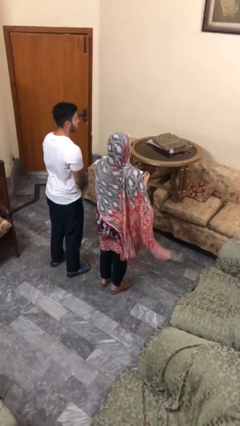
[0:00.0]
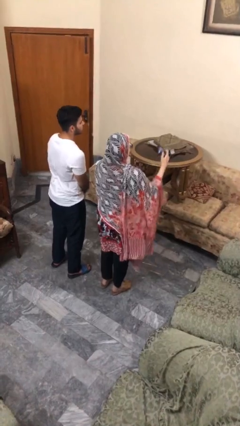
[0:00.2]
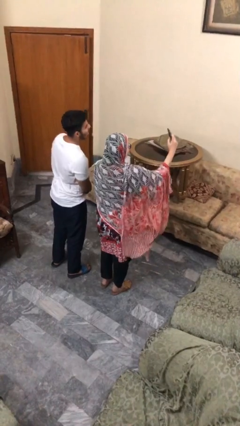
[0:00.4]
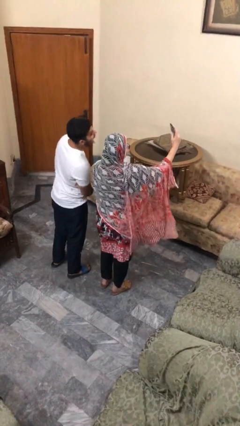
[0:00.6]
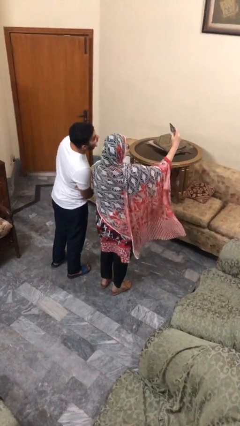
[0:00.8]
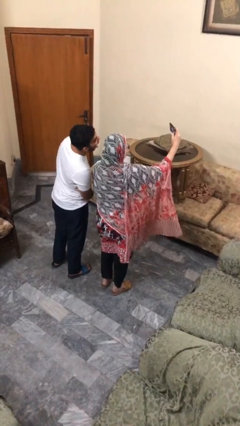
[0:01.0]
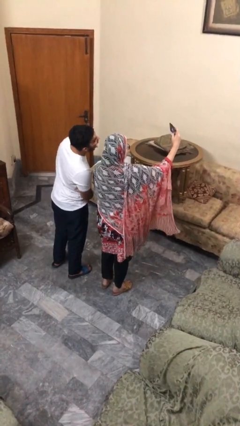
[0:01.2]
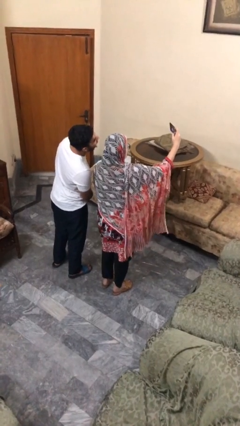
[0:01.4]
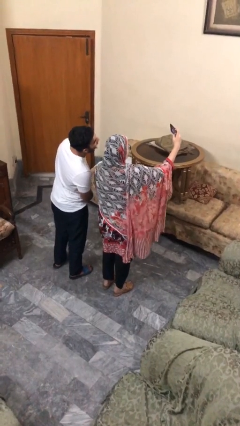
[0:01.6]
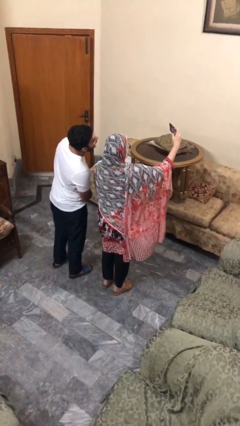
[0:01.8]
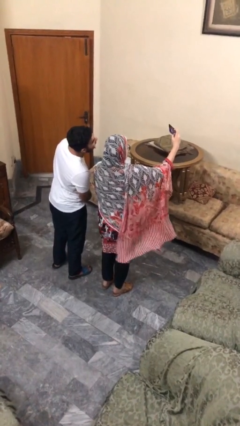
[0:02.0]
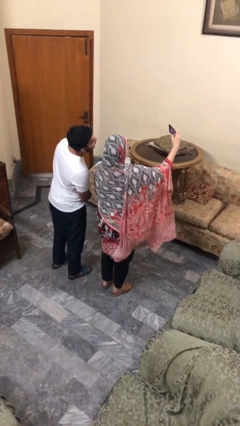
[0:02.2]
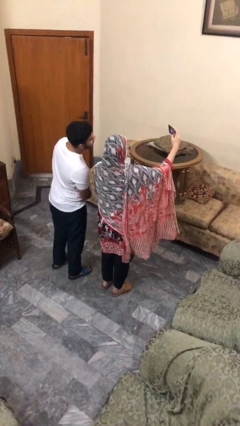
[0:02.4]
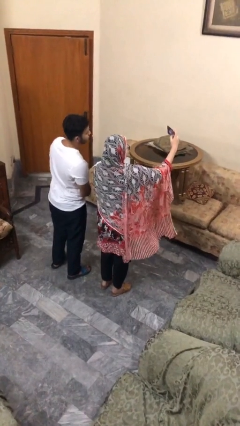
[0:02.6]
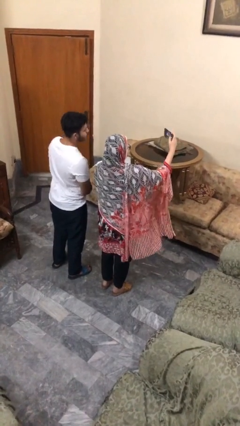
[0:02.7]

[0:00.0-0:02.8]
person takes selfie with person

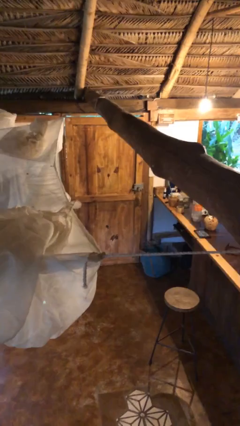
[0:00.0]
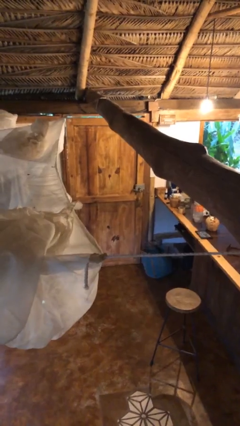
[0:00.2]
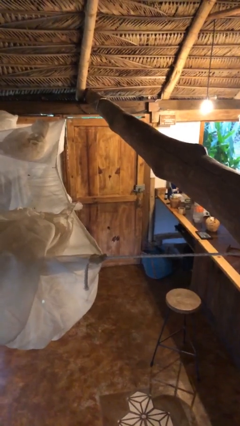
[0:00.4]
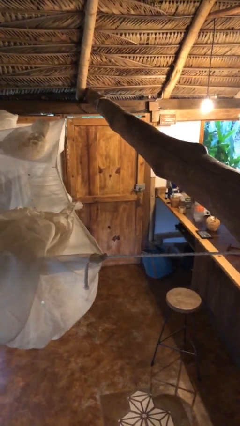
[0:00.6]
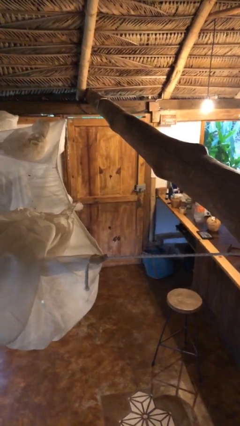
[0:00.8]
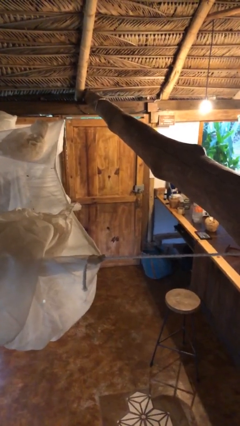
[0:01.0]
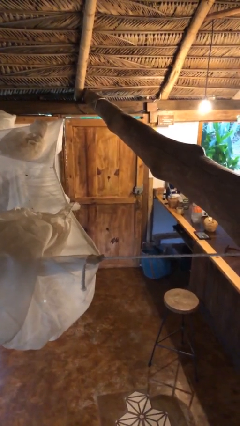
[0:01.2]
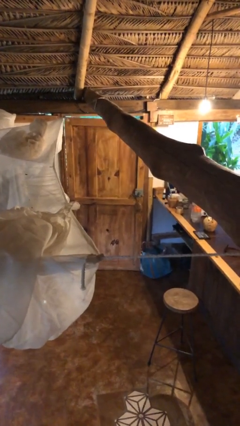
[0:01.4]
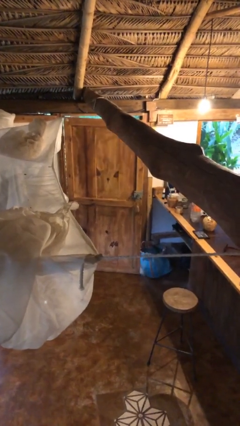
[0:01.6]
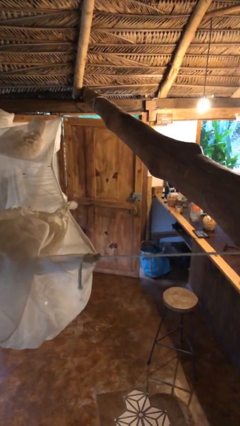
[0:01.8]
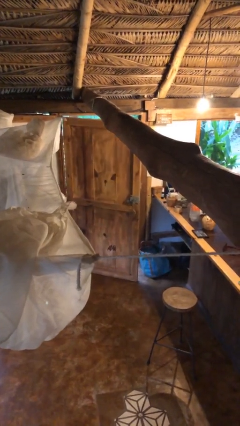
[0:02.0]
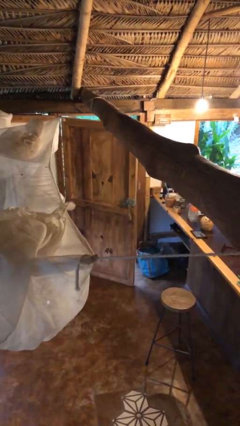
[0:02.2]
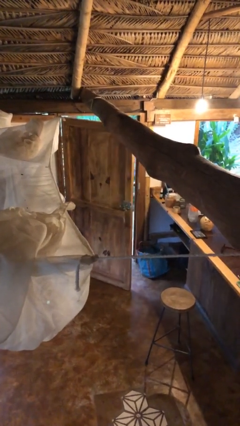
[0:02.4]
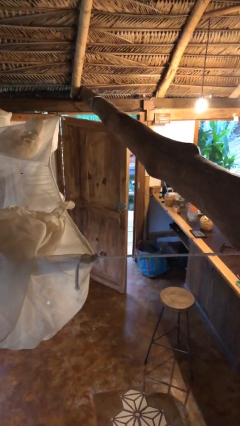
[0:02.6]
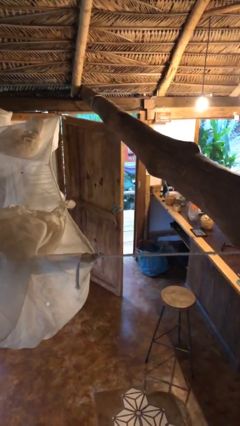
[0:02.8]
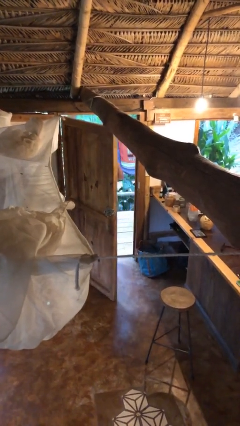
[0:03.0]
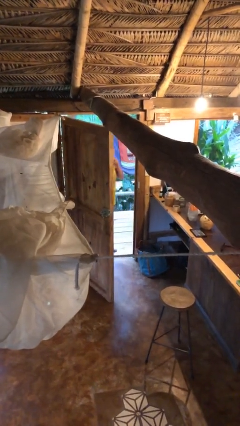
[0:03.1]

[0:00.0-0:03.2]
person opens facility door

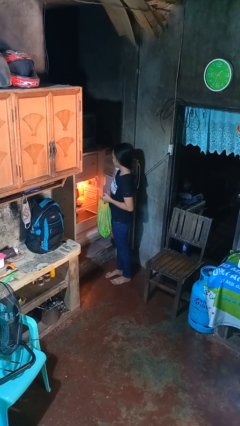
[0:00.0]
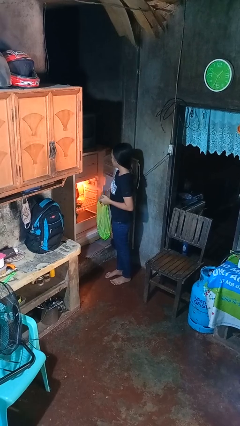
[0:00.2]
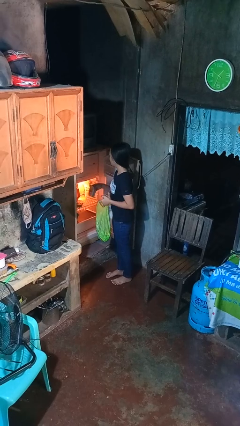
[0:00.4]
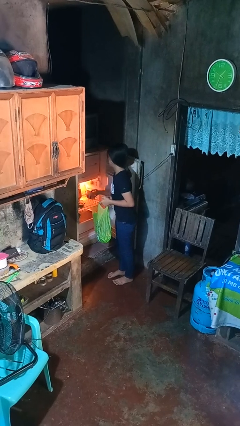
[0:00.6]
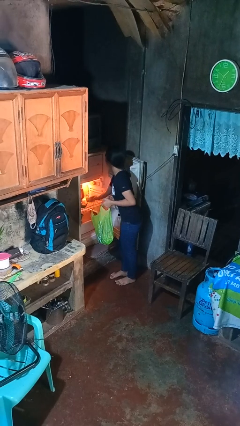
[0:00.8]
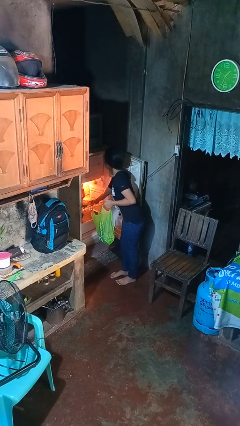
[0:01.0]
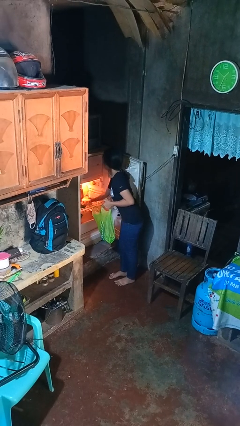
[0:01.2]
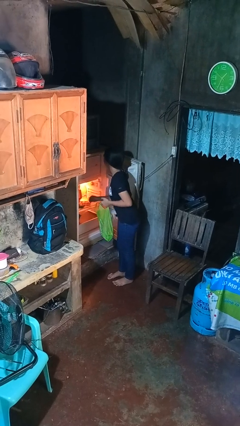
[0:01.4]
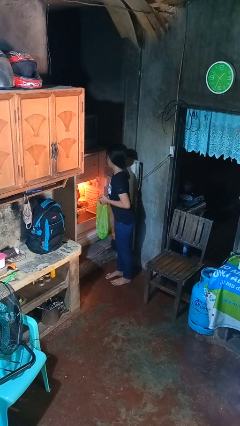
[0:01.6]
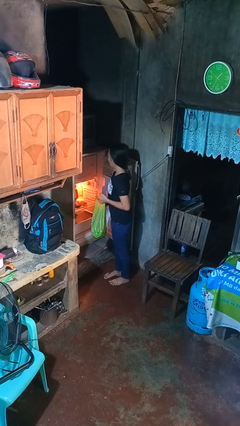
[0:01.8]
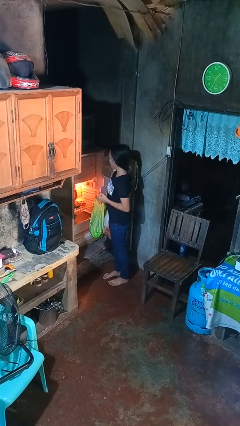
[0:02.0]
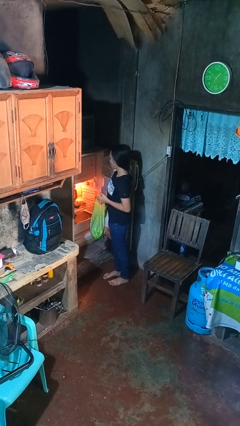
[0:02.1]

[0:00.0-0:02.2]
person loads groceries into refrigerator

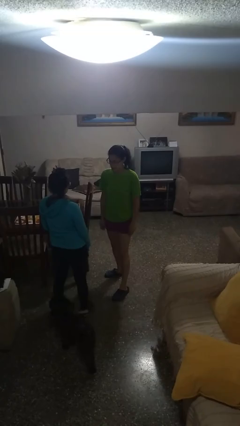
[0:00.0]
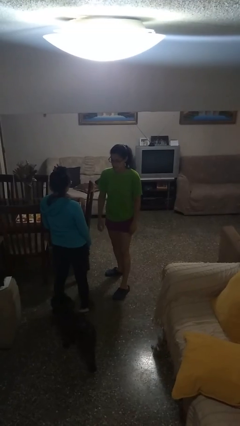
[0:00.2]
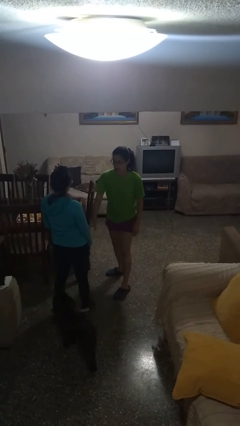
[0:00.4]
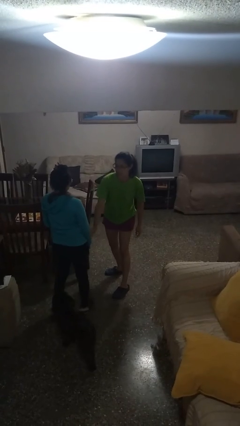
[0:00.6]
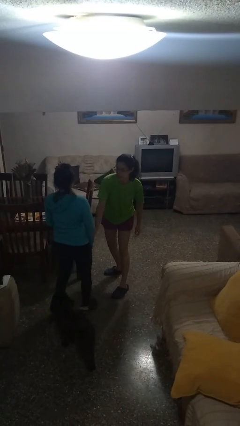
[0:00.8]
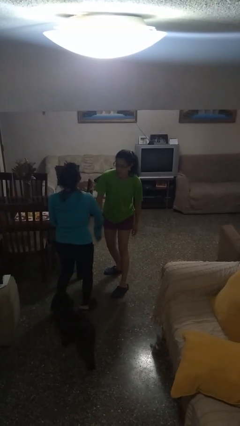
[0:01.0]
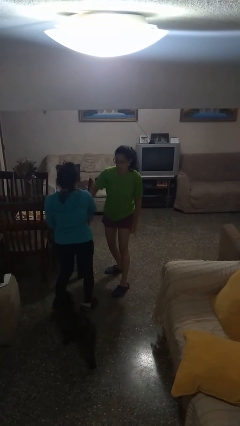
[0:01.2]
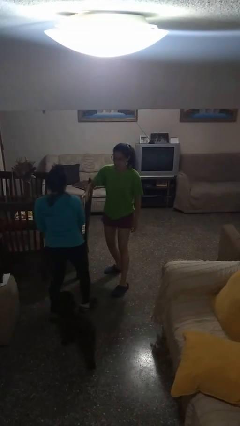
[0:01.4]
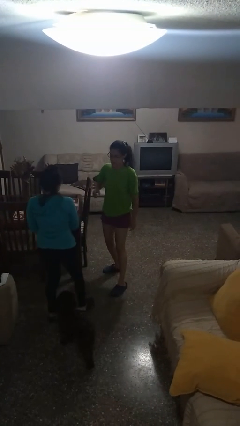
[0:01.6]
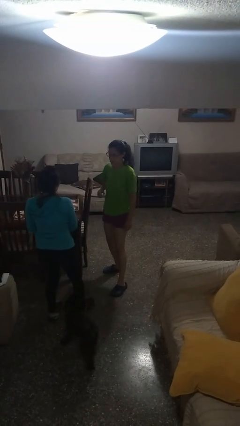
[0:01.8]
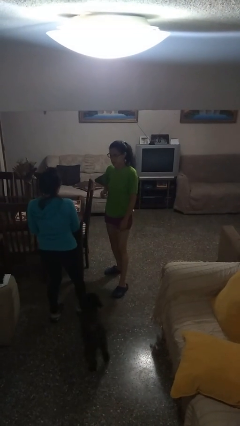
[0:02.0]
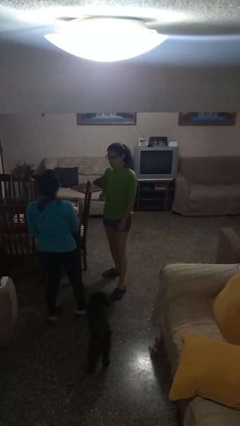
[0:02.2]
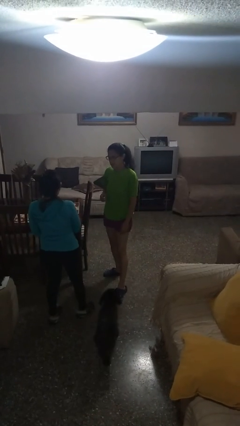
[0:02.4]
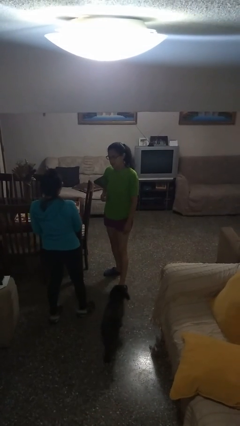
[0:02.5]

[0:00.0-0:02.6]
person grabs person by forearm

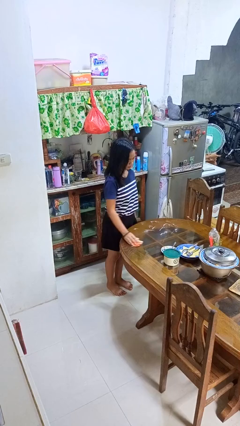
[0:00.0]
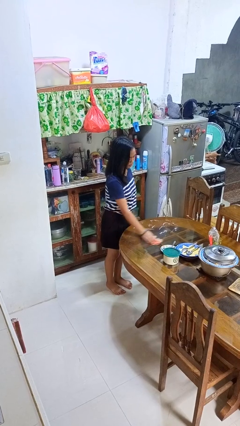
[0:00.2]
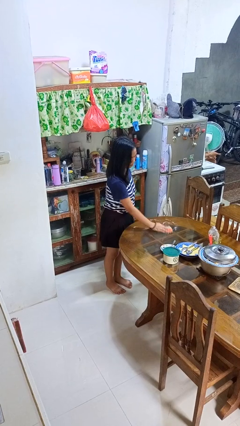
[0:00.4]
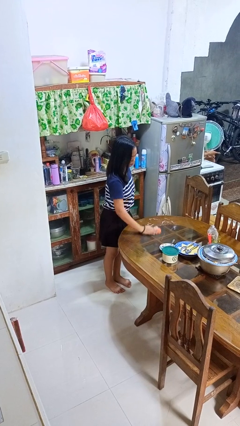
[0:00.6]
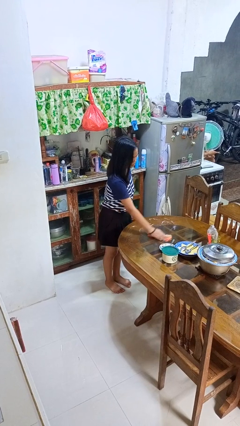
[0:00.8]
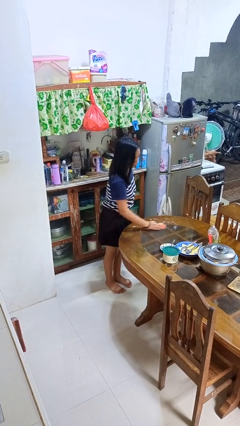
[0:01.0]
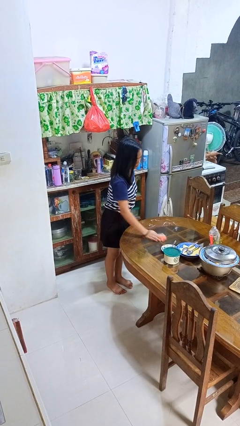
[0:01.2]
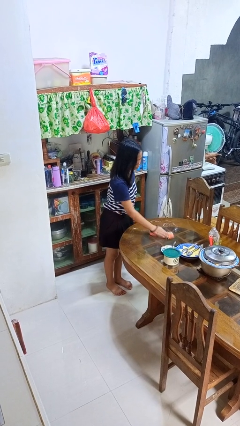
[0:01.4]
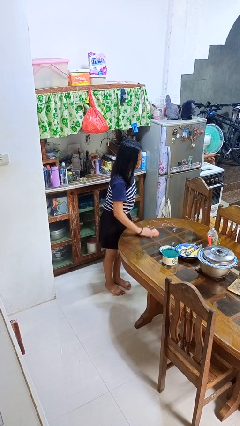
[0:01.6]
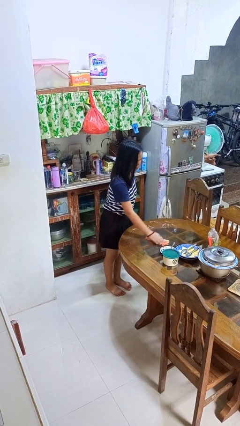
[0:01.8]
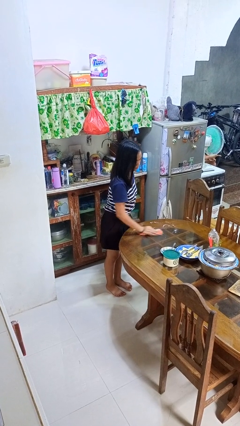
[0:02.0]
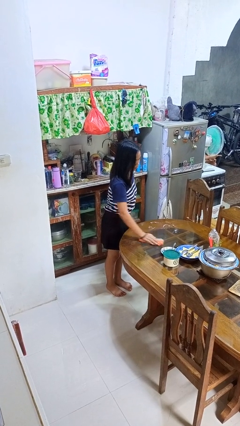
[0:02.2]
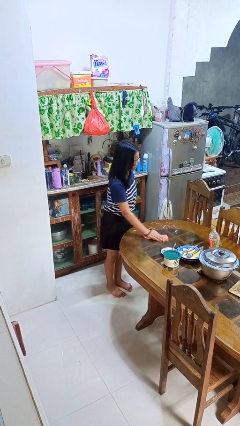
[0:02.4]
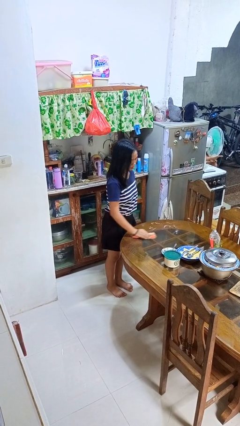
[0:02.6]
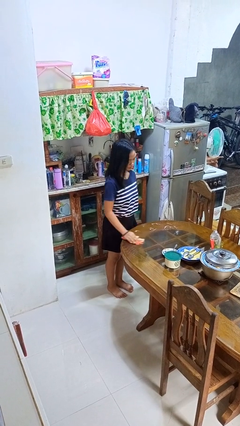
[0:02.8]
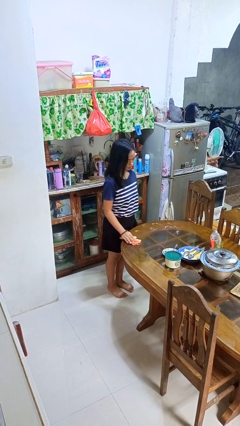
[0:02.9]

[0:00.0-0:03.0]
person cleans table with rag

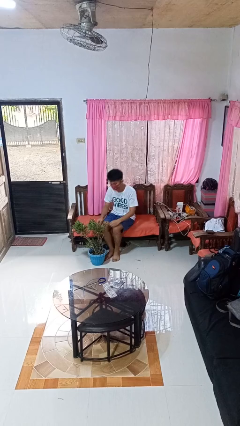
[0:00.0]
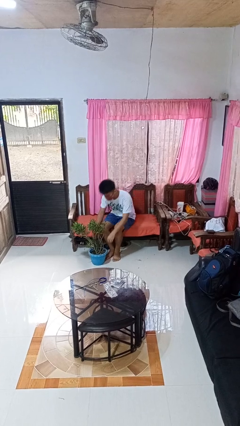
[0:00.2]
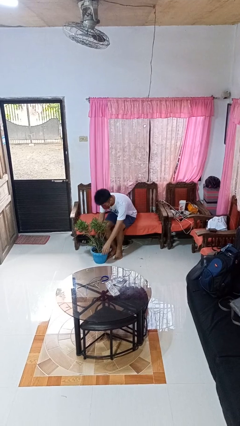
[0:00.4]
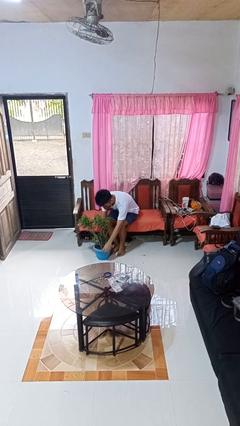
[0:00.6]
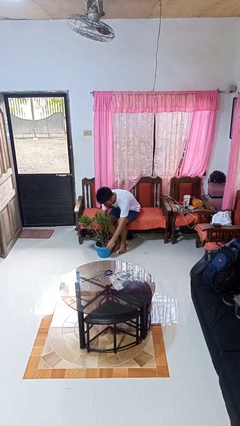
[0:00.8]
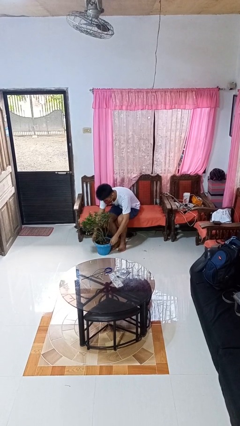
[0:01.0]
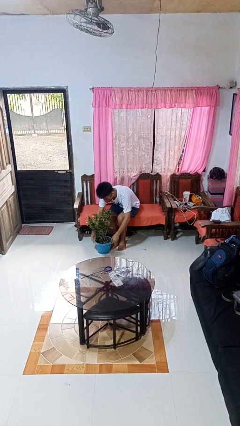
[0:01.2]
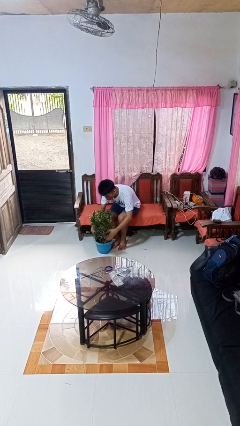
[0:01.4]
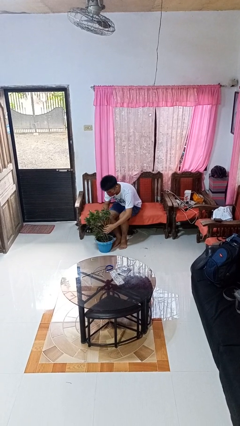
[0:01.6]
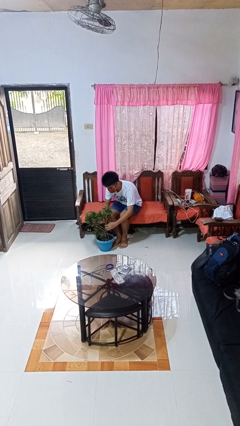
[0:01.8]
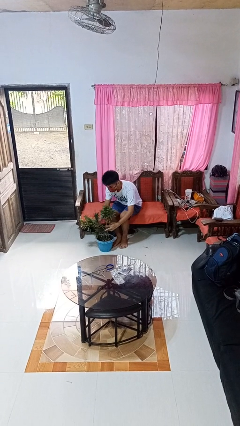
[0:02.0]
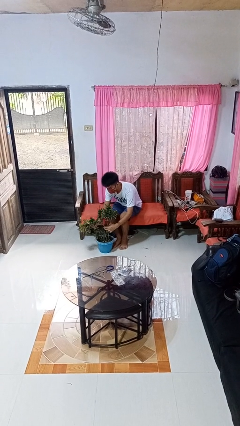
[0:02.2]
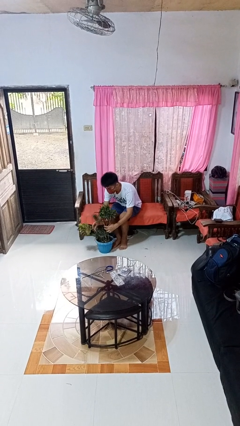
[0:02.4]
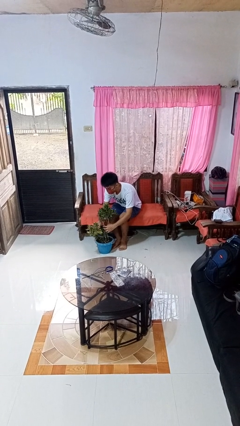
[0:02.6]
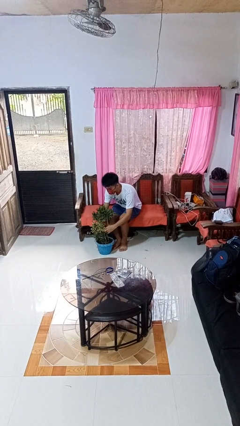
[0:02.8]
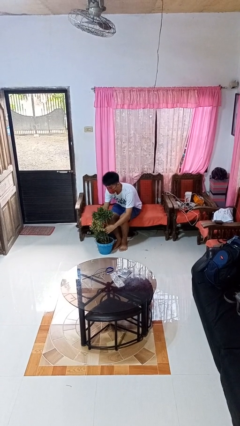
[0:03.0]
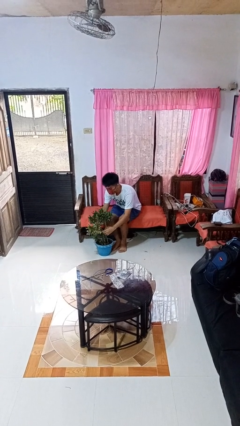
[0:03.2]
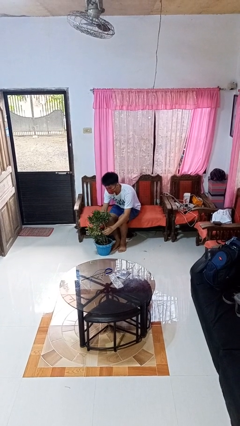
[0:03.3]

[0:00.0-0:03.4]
person arranges flowers in vase

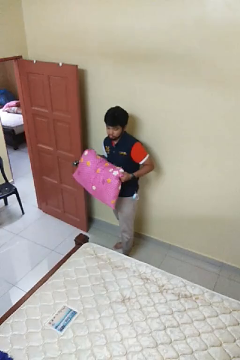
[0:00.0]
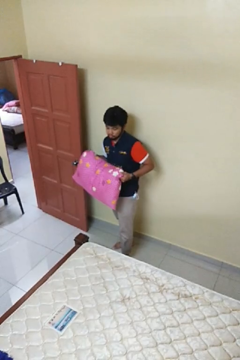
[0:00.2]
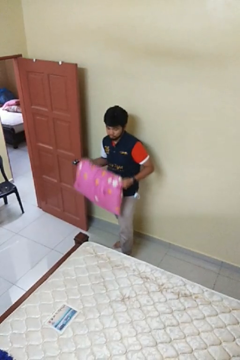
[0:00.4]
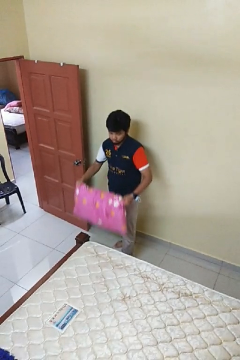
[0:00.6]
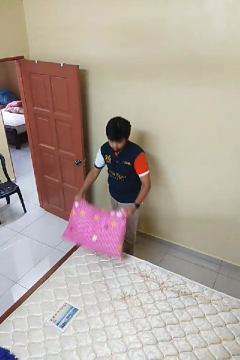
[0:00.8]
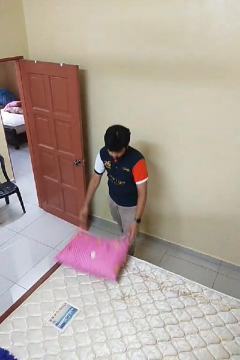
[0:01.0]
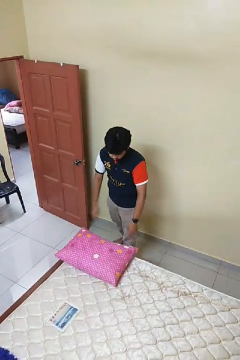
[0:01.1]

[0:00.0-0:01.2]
person puts down object on bed
